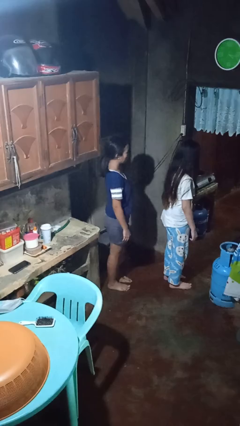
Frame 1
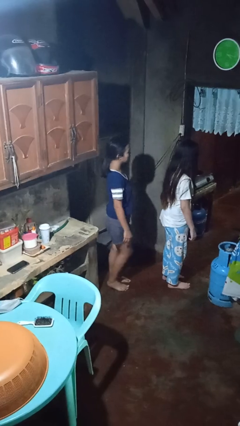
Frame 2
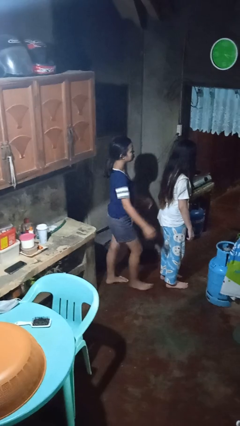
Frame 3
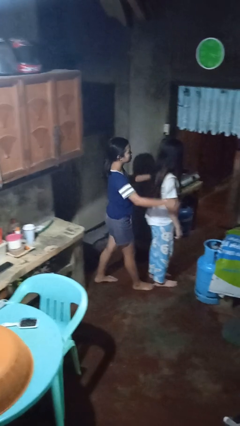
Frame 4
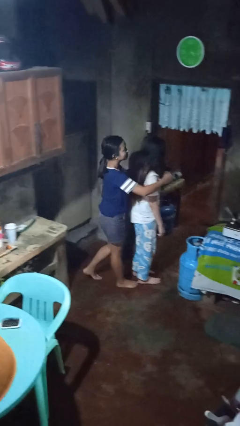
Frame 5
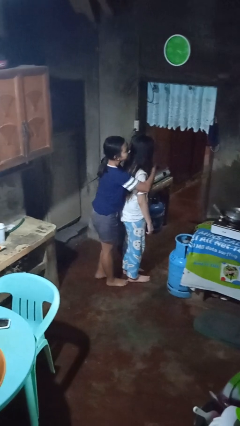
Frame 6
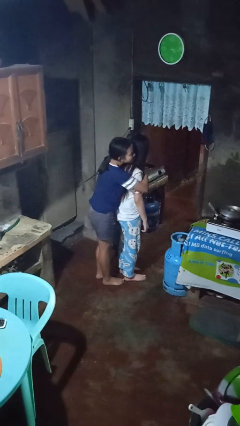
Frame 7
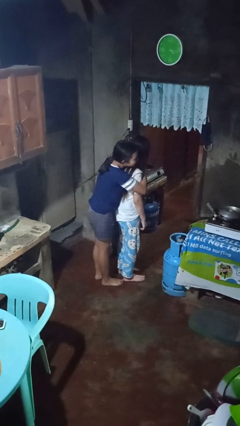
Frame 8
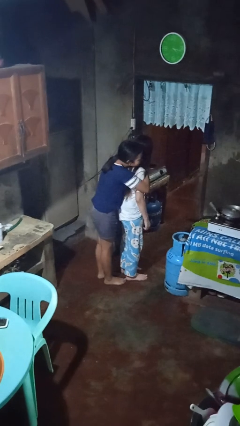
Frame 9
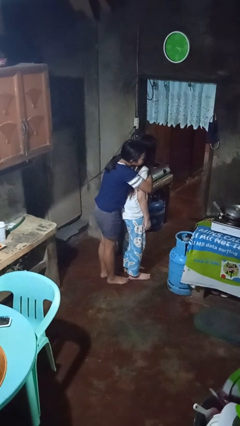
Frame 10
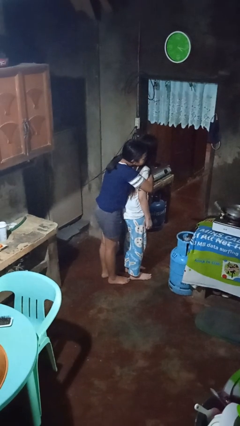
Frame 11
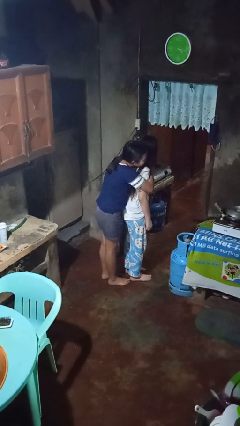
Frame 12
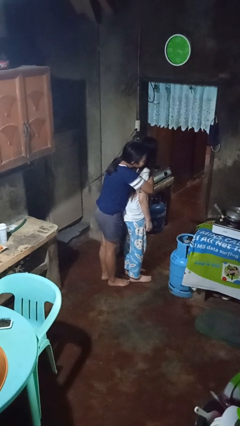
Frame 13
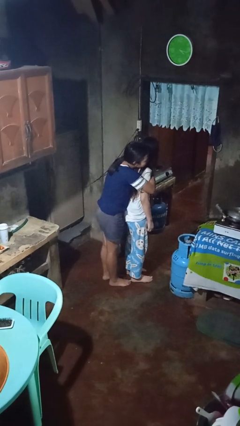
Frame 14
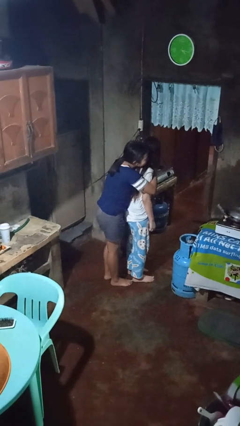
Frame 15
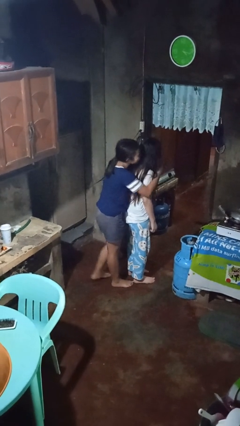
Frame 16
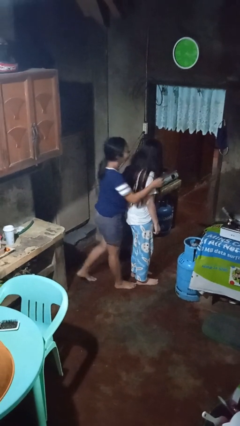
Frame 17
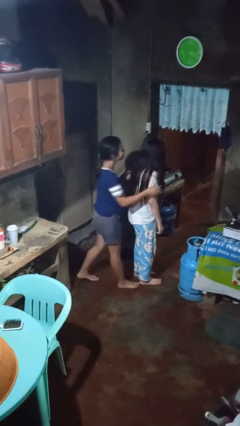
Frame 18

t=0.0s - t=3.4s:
person hugs person from behind

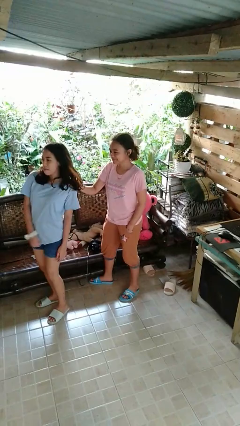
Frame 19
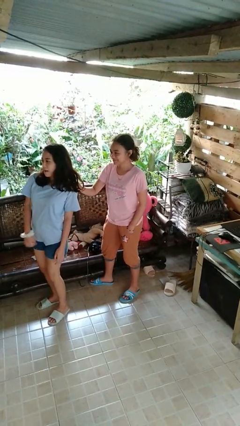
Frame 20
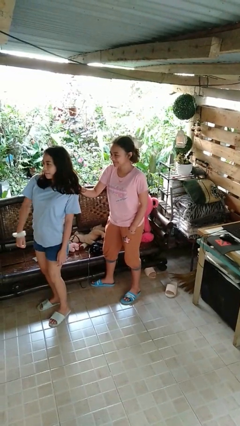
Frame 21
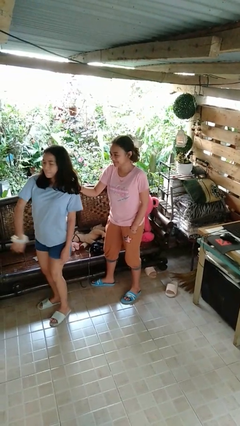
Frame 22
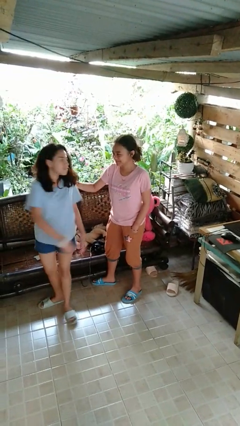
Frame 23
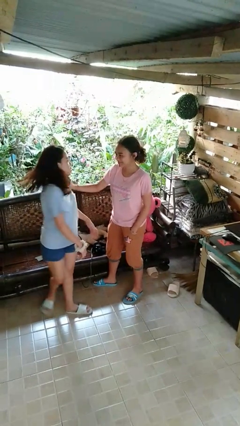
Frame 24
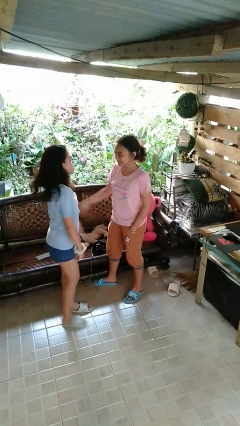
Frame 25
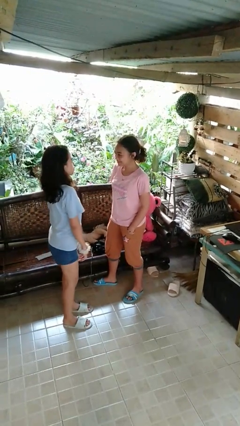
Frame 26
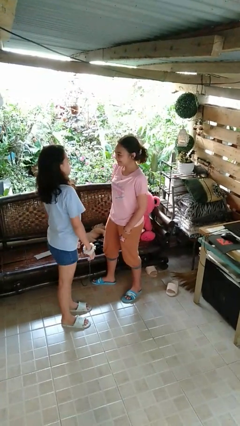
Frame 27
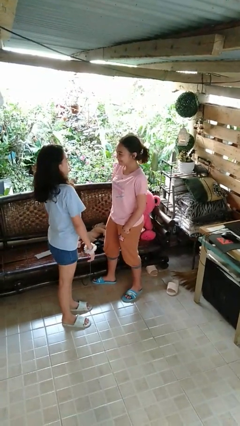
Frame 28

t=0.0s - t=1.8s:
person spins person around

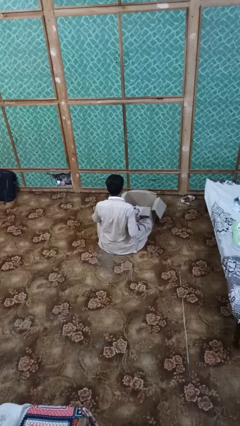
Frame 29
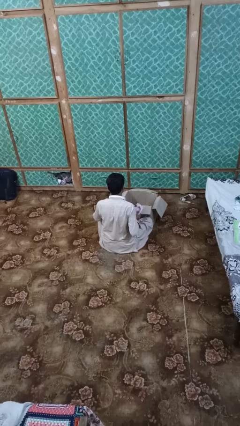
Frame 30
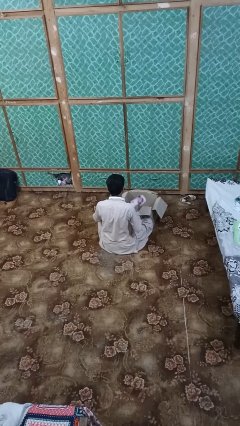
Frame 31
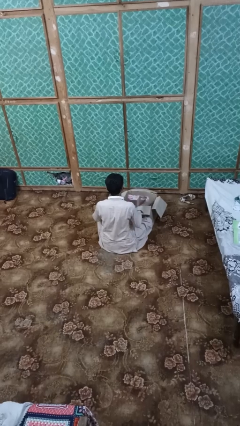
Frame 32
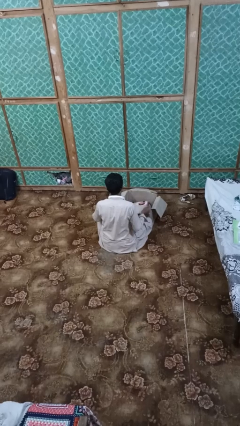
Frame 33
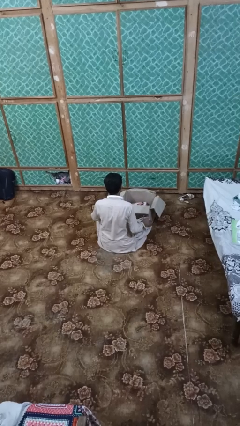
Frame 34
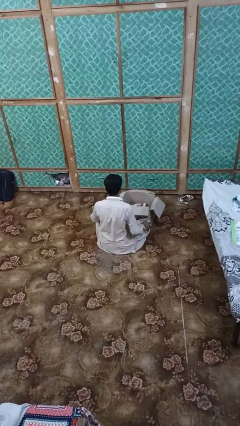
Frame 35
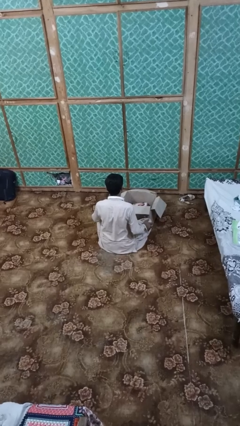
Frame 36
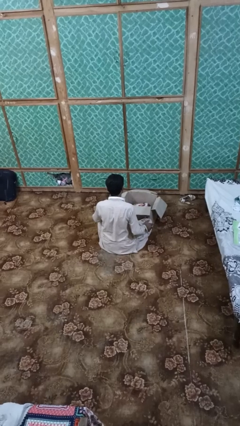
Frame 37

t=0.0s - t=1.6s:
person puts object into box

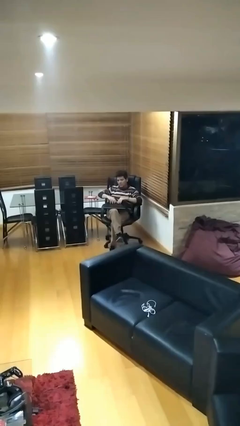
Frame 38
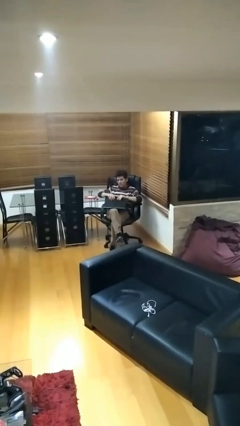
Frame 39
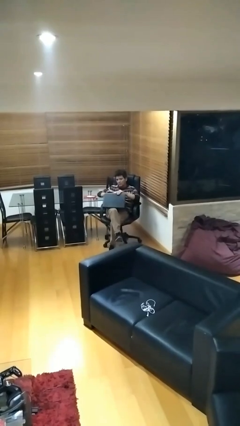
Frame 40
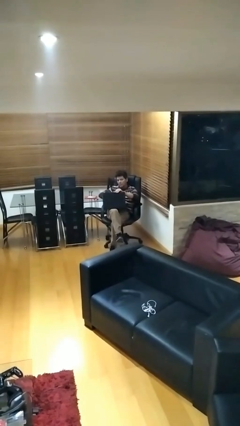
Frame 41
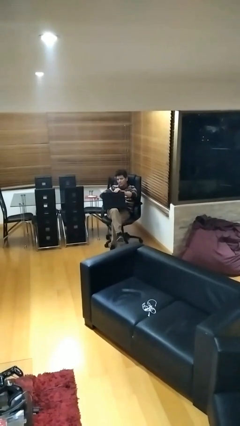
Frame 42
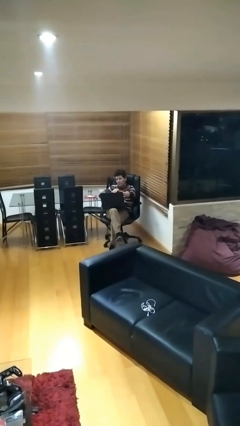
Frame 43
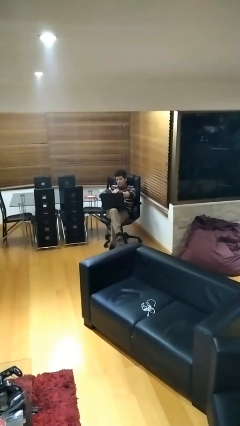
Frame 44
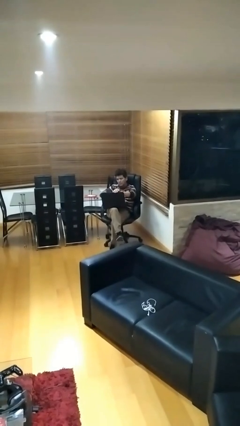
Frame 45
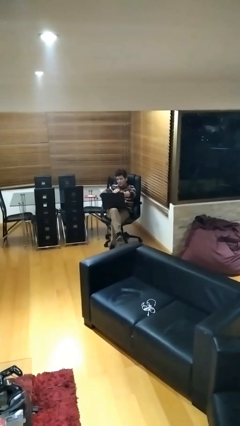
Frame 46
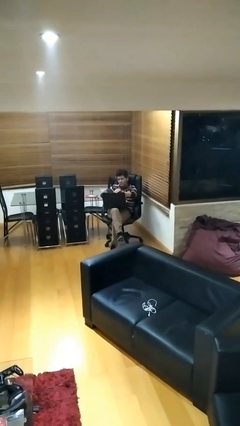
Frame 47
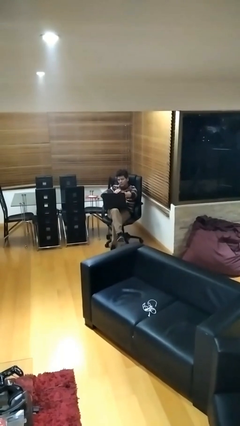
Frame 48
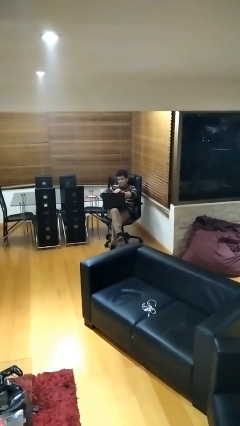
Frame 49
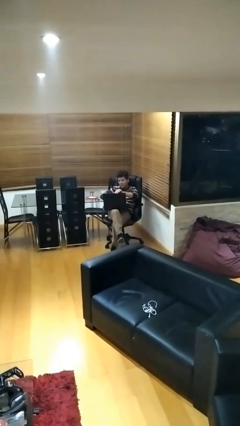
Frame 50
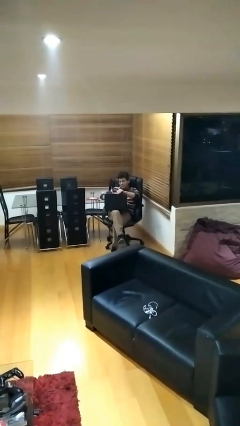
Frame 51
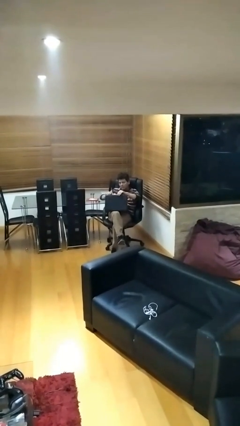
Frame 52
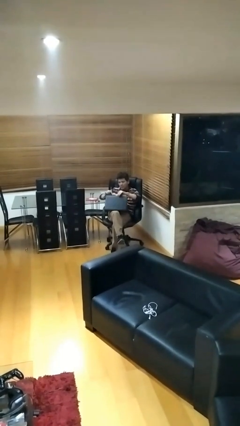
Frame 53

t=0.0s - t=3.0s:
person interacts with laptop

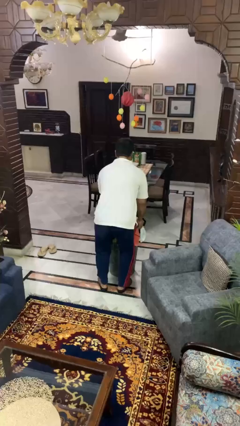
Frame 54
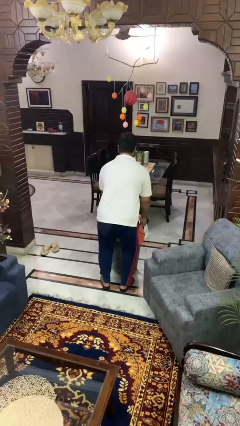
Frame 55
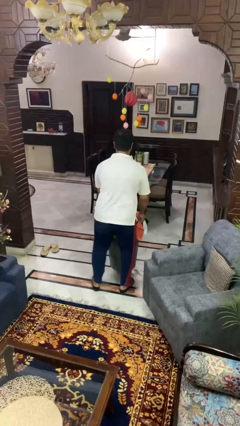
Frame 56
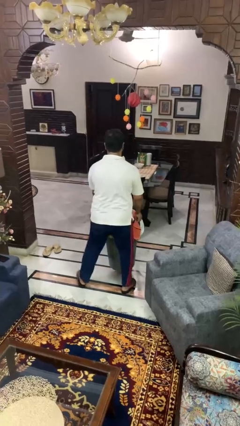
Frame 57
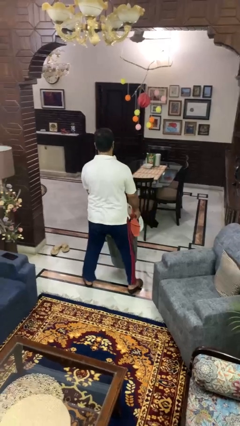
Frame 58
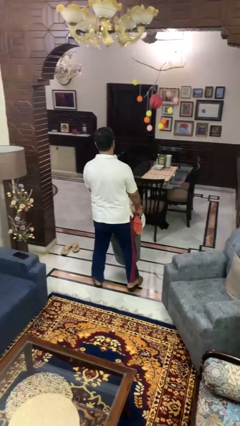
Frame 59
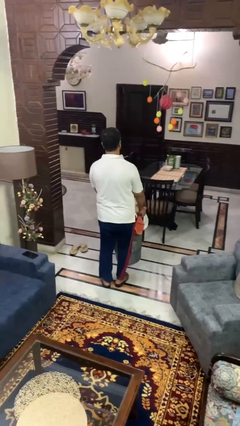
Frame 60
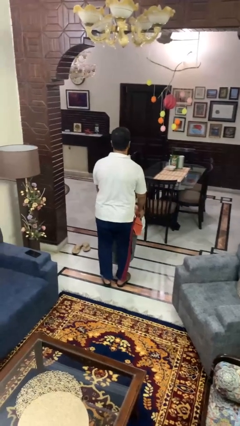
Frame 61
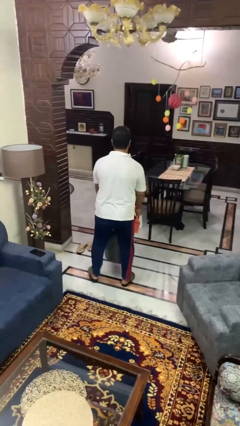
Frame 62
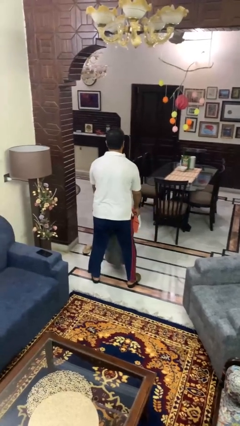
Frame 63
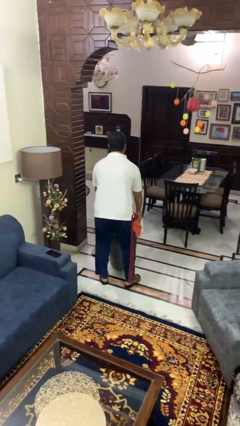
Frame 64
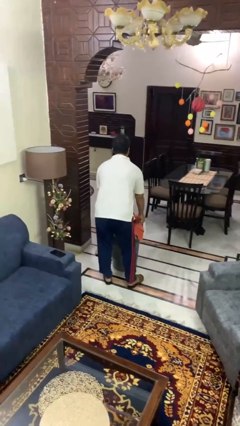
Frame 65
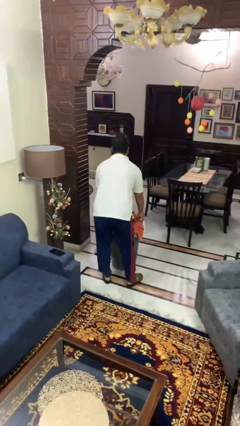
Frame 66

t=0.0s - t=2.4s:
person carries laundry basket

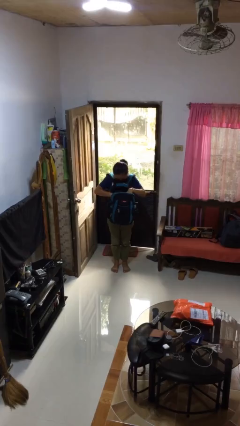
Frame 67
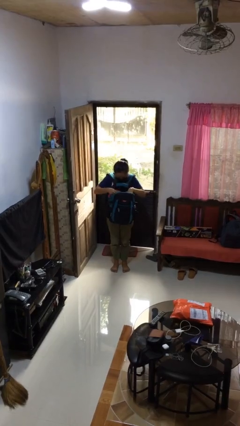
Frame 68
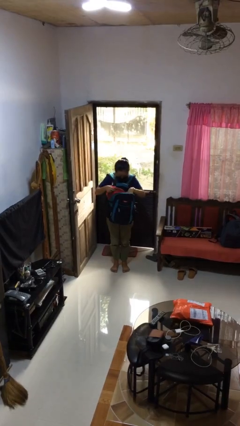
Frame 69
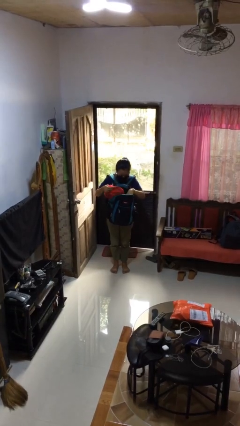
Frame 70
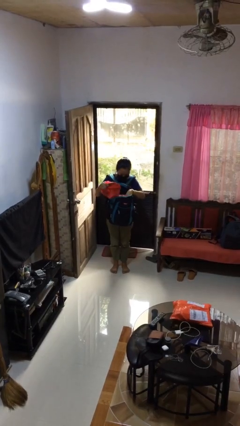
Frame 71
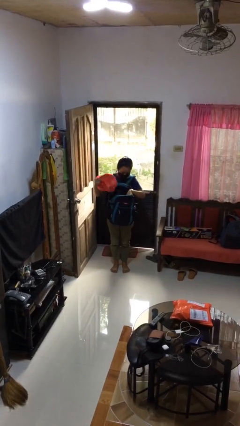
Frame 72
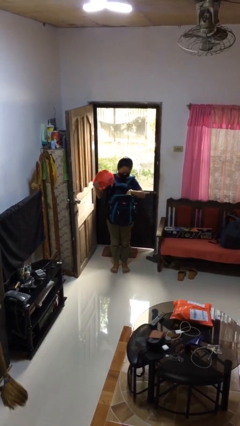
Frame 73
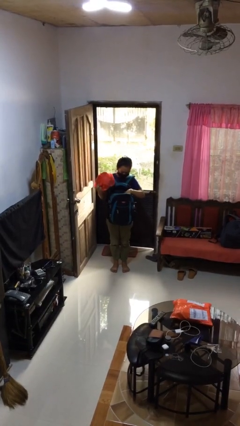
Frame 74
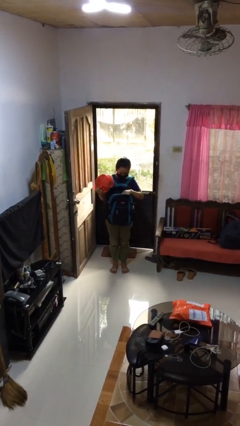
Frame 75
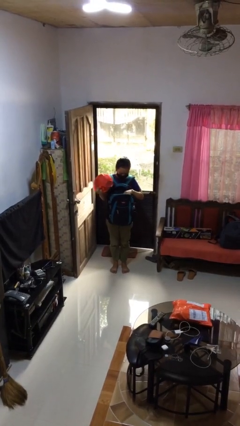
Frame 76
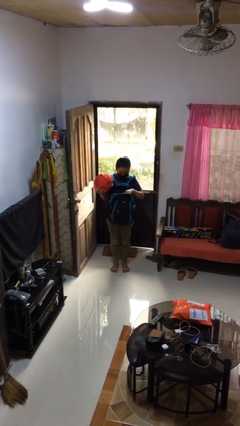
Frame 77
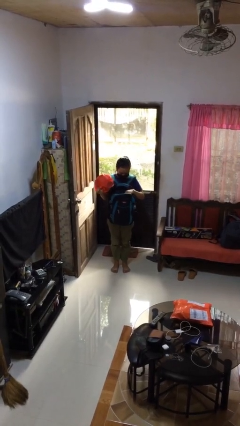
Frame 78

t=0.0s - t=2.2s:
person takes object from backpack

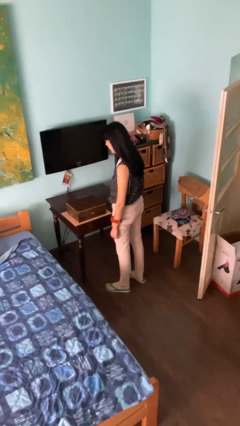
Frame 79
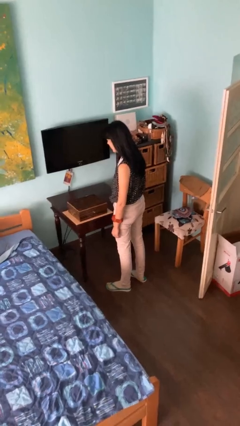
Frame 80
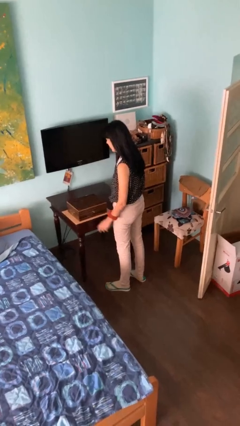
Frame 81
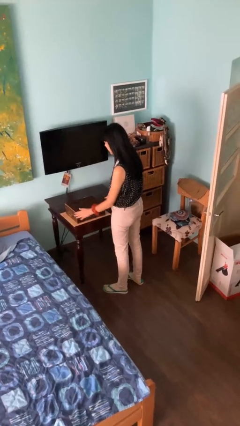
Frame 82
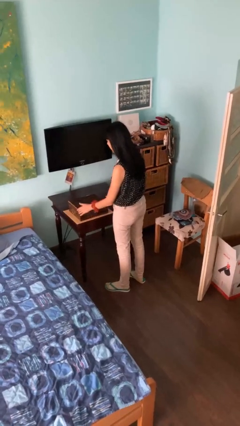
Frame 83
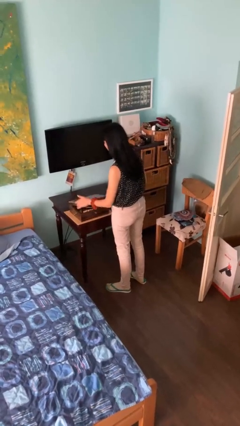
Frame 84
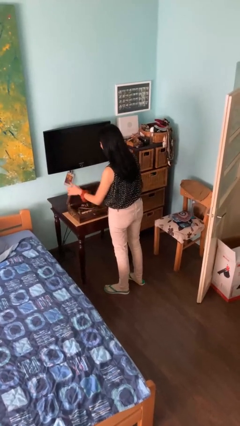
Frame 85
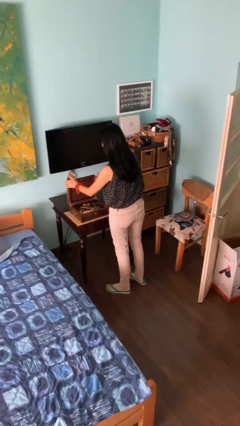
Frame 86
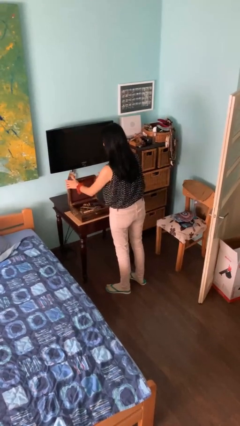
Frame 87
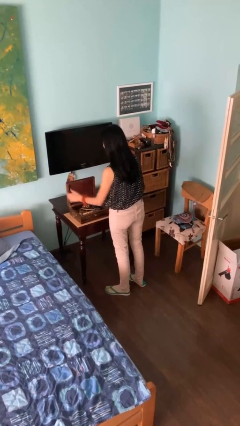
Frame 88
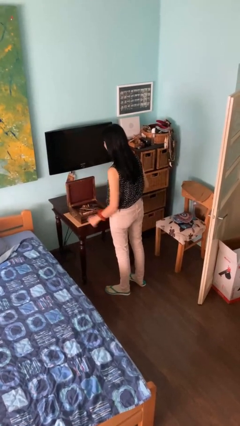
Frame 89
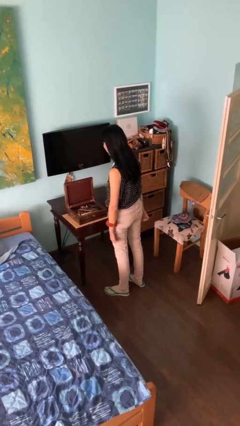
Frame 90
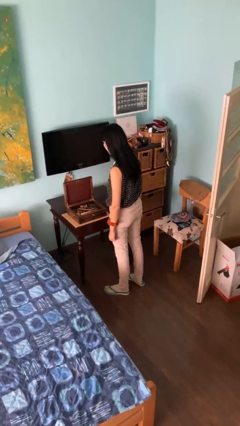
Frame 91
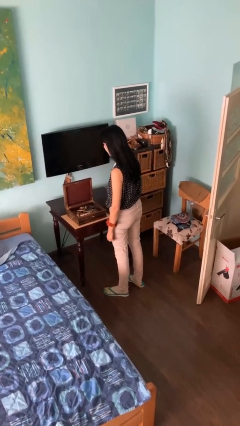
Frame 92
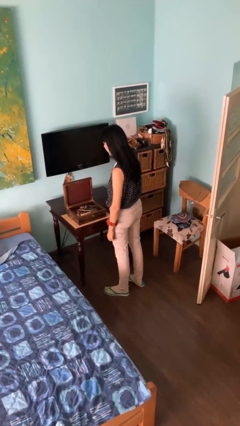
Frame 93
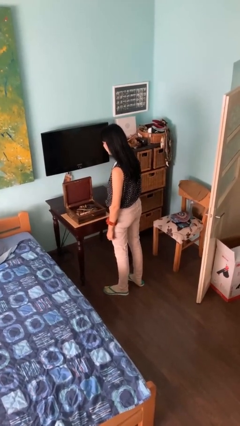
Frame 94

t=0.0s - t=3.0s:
person opens jewelry box
